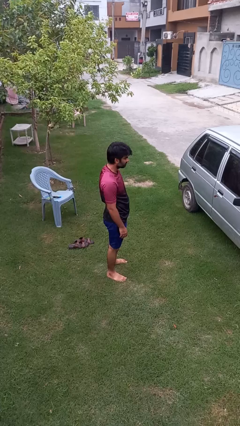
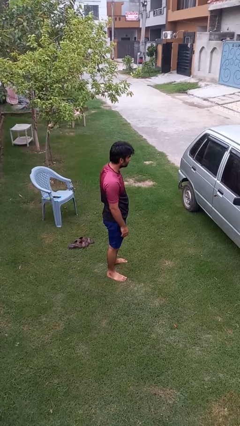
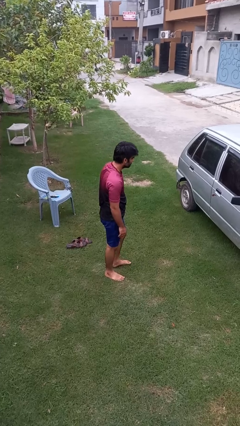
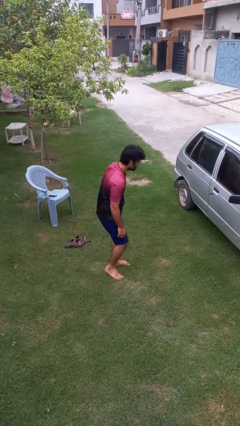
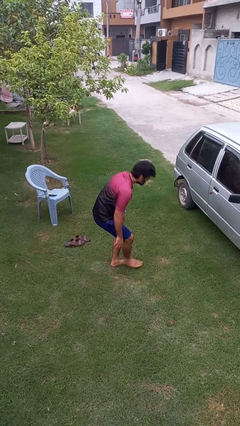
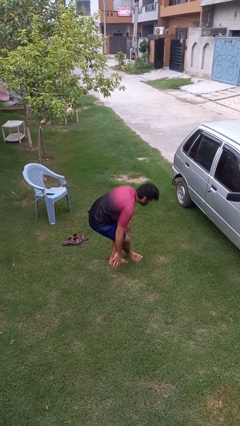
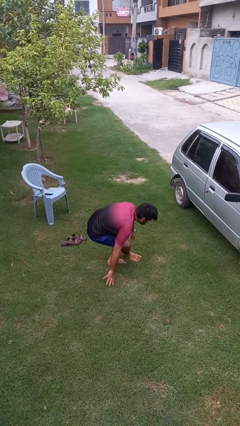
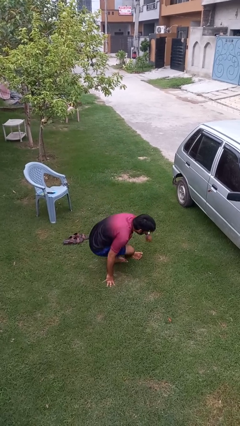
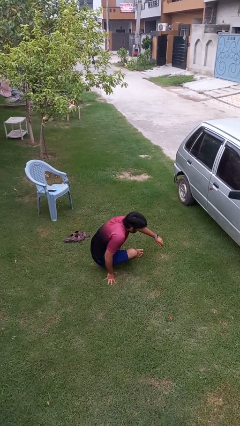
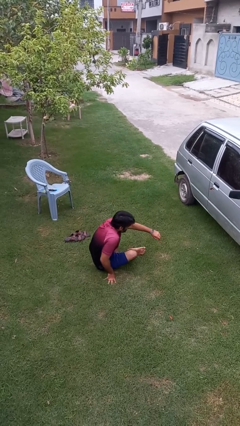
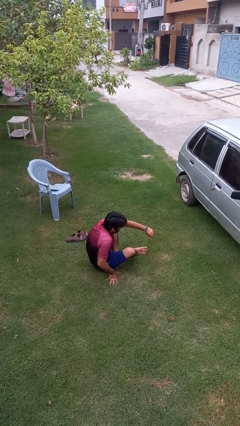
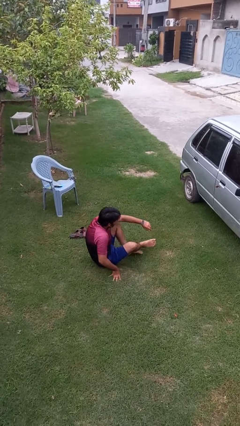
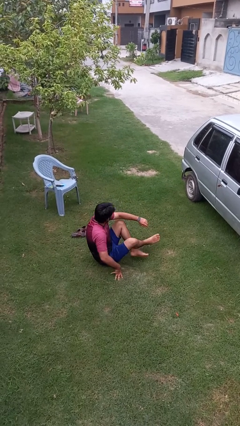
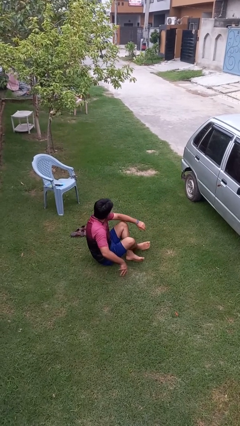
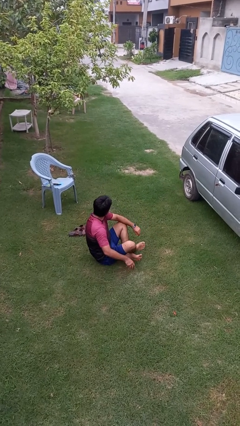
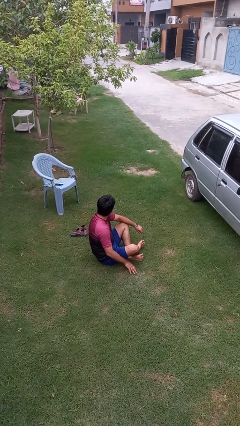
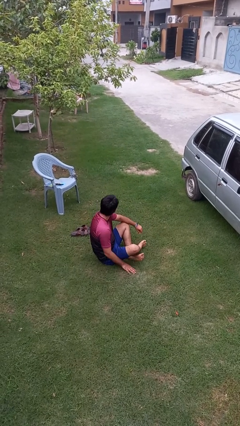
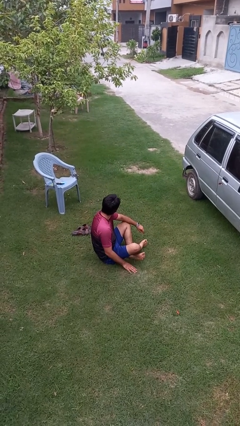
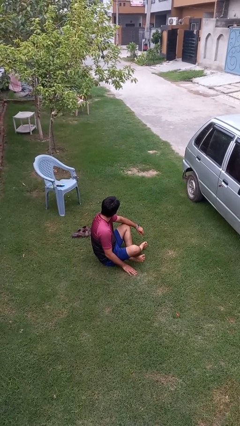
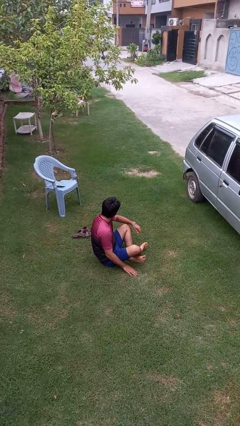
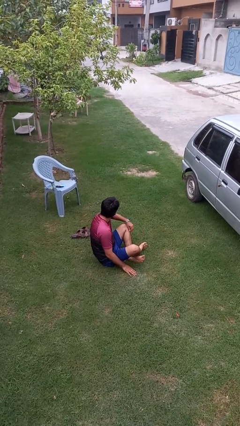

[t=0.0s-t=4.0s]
person sits crisscross

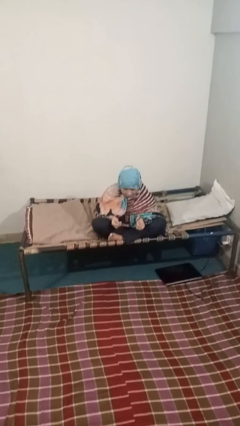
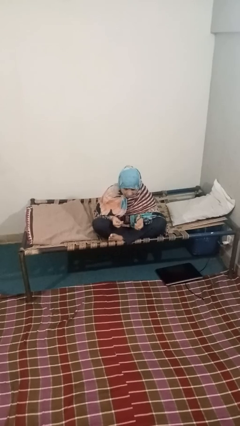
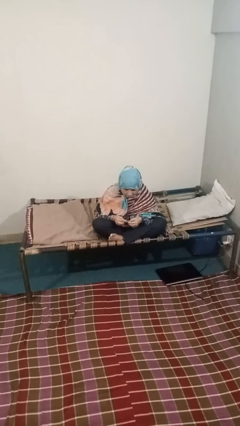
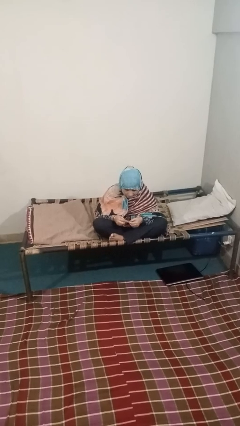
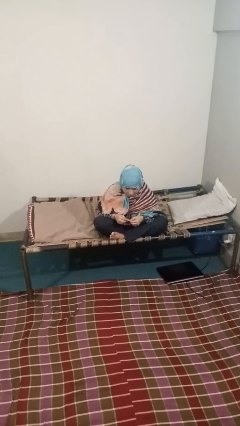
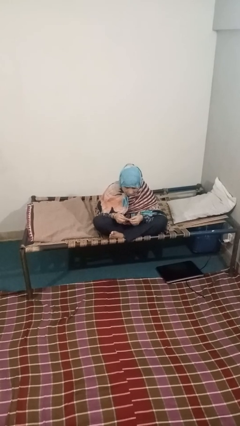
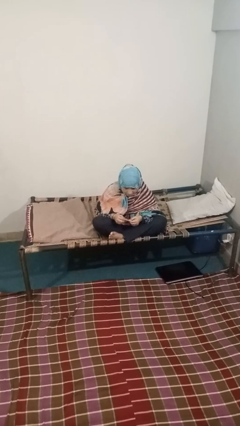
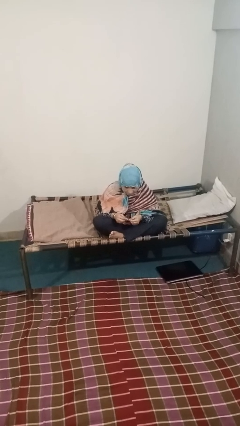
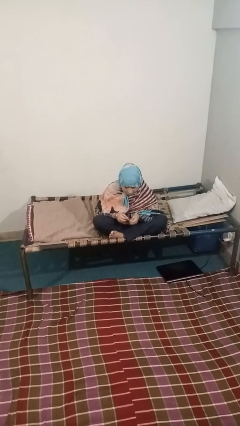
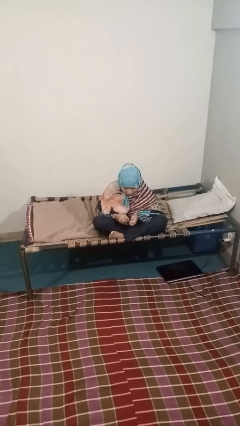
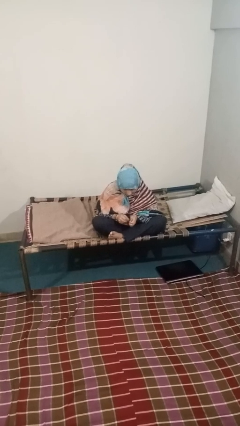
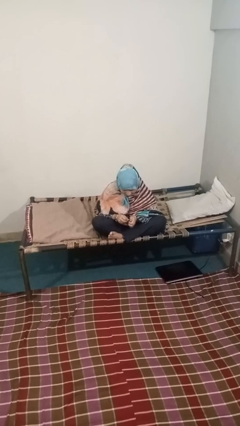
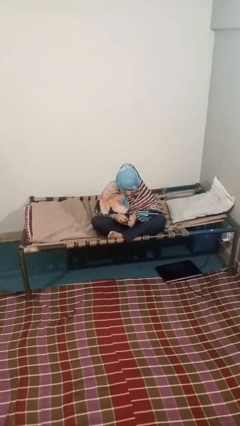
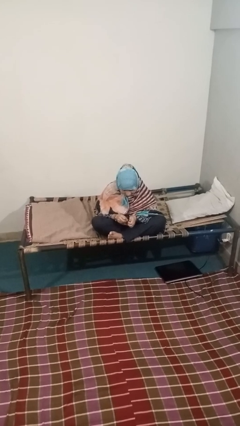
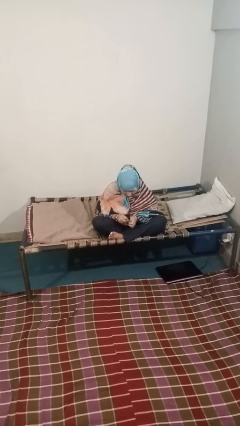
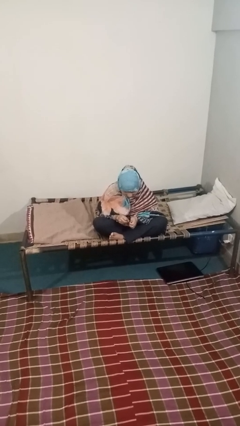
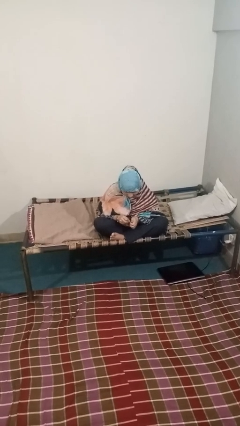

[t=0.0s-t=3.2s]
person files fingernails

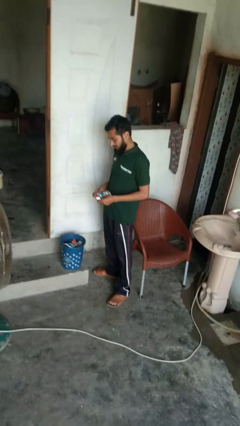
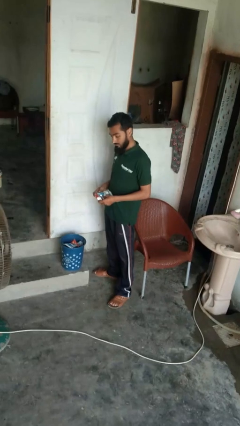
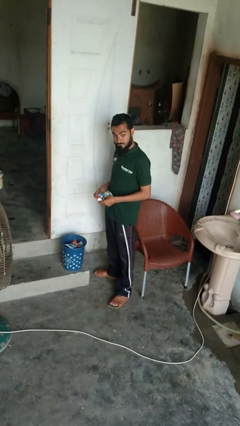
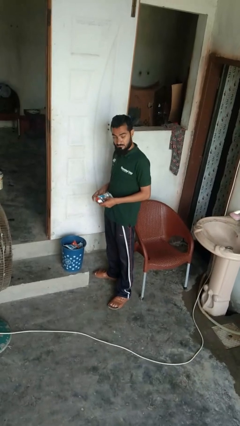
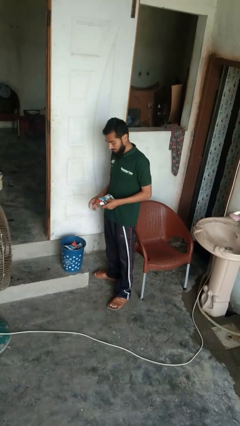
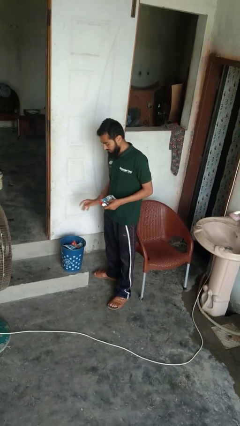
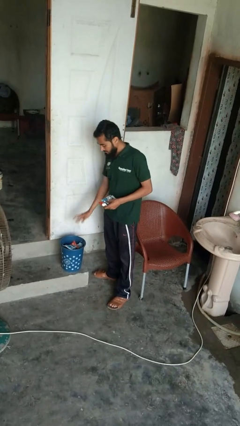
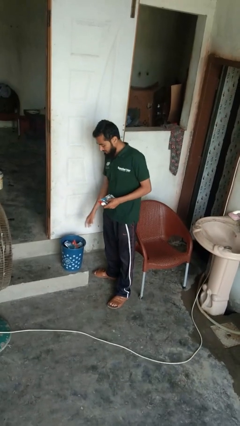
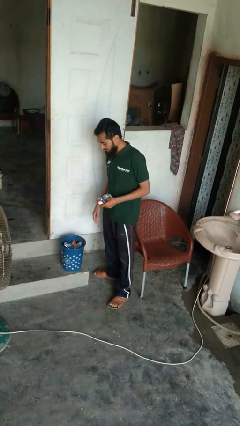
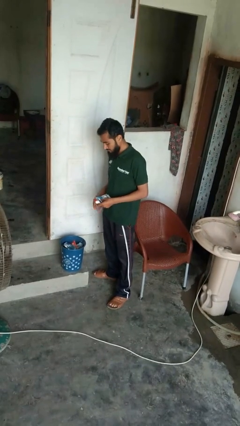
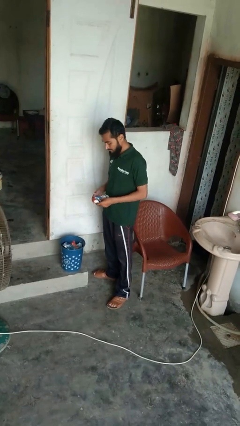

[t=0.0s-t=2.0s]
person discards trash

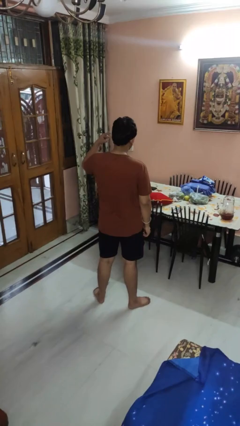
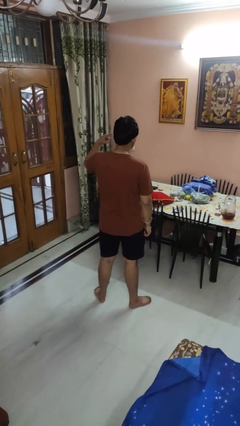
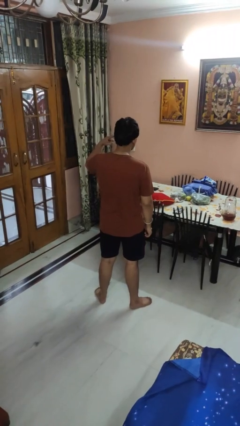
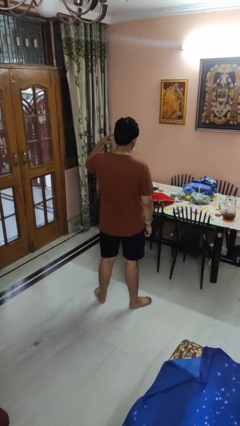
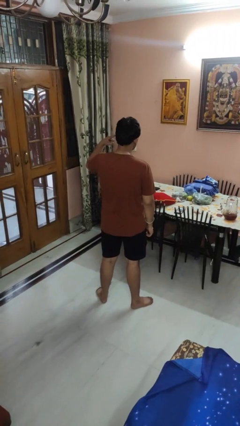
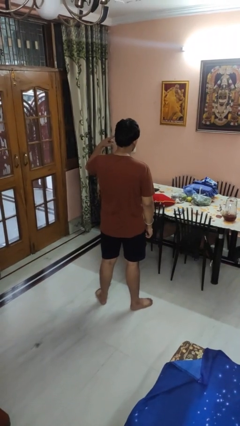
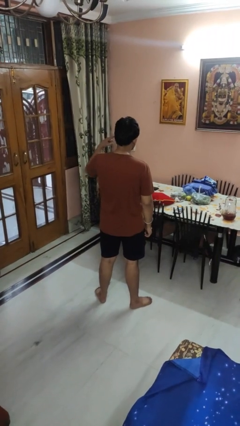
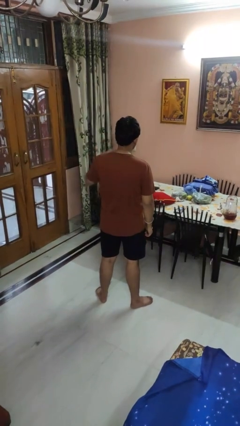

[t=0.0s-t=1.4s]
person gestures listen closely

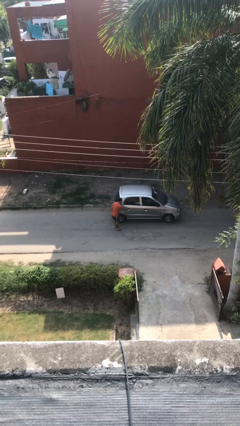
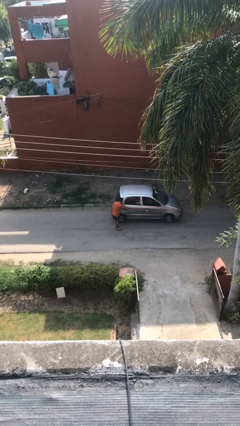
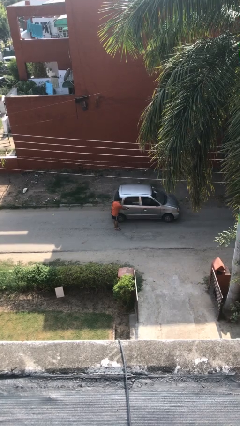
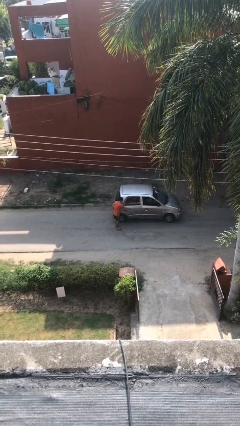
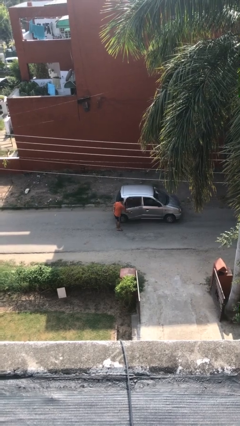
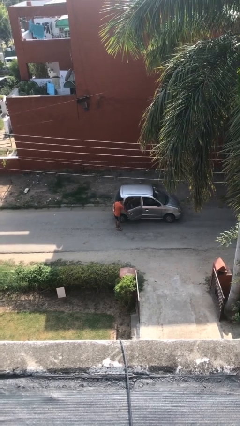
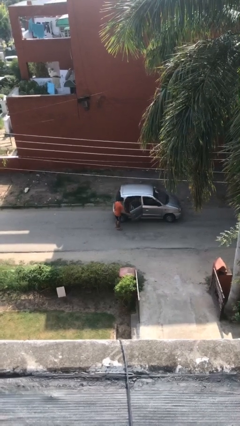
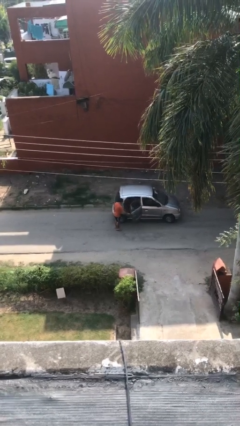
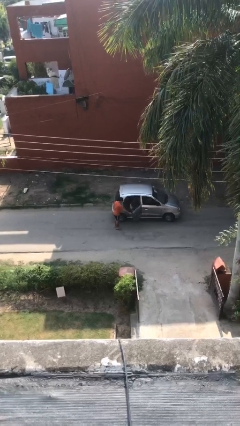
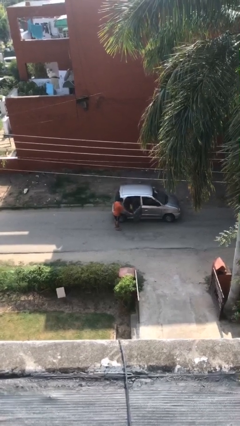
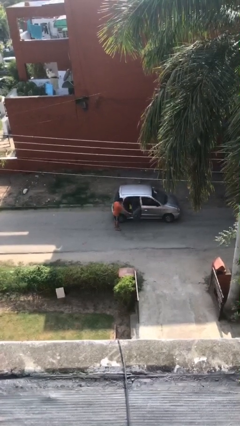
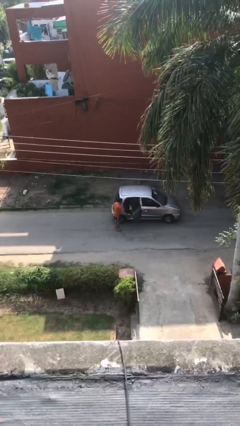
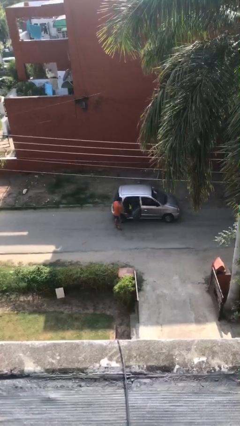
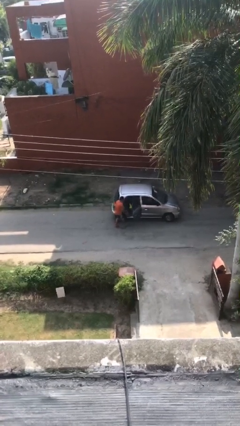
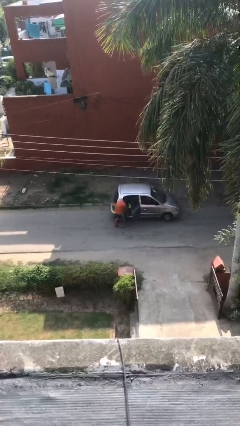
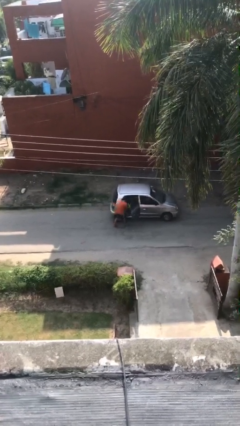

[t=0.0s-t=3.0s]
person opens car door

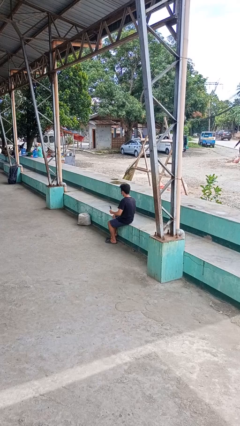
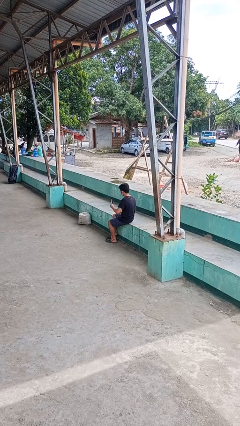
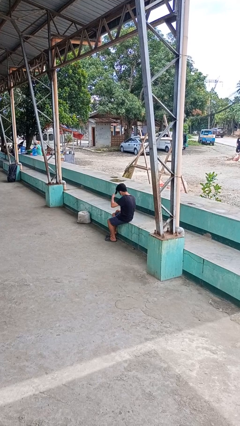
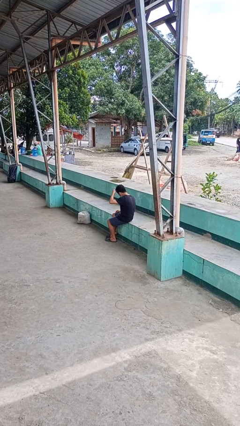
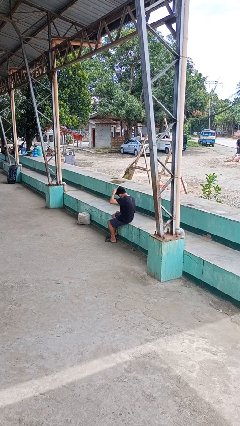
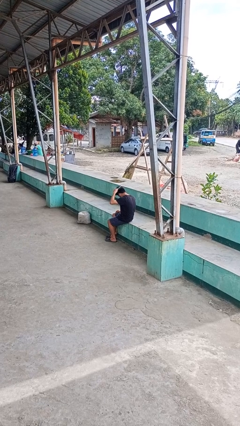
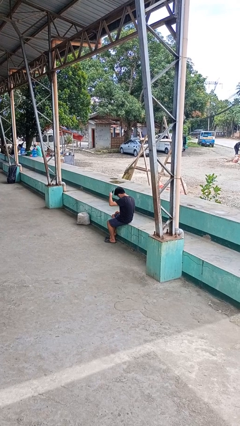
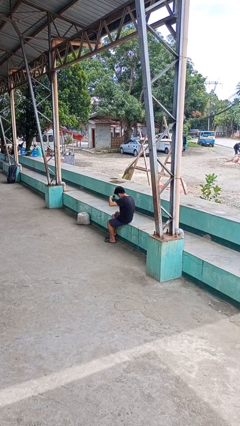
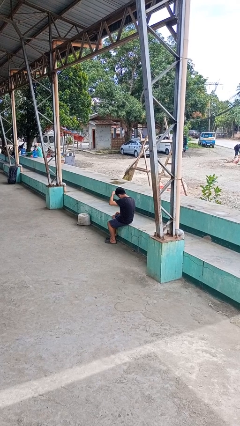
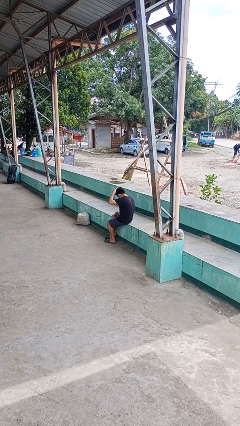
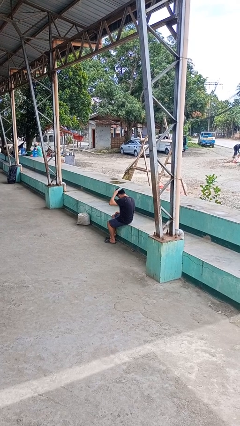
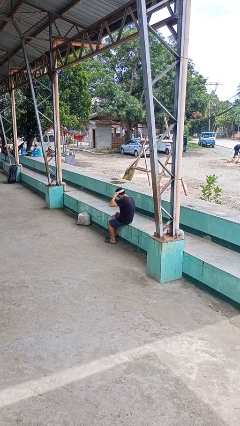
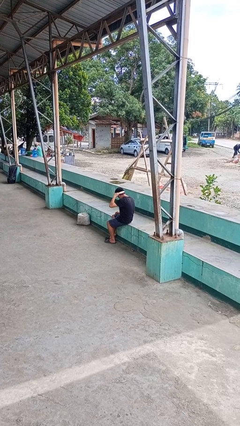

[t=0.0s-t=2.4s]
person brushes hair

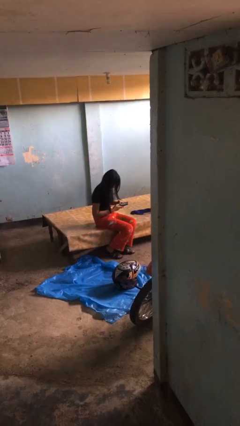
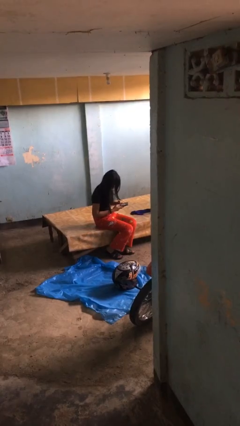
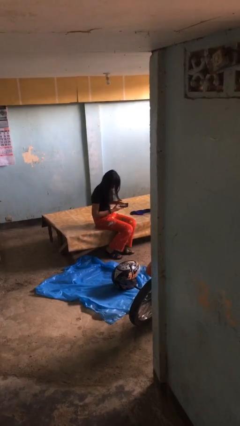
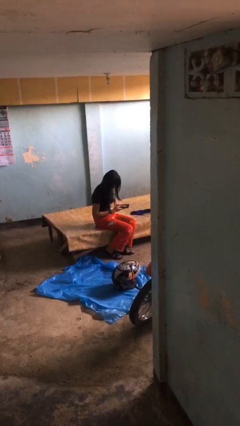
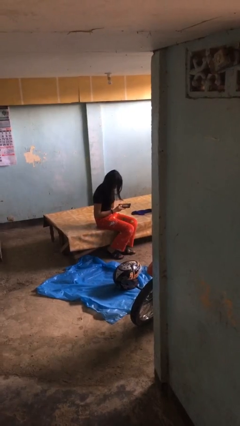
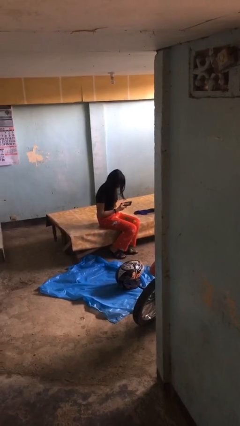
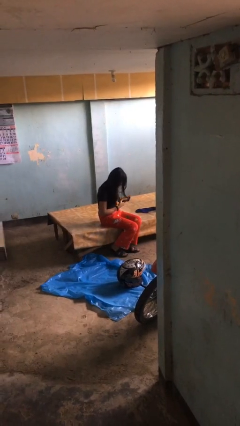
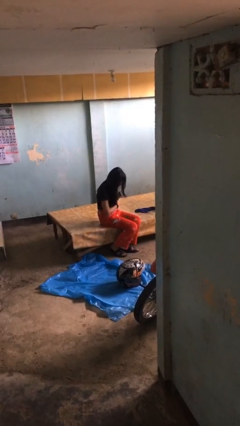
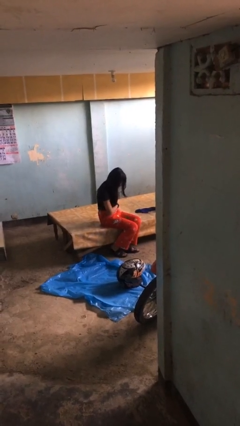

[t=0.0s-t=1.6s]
person puts phone into pocket
